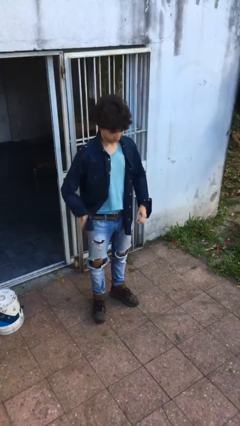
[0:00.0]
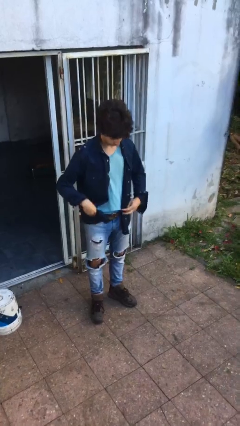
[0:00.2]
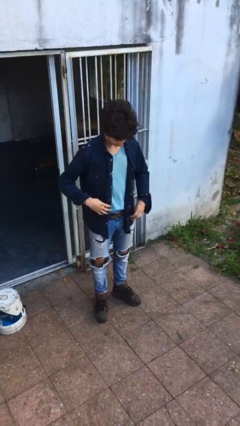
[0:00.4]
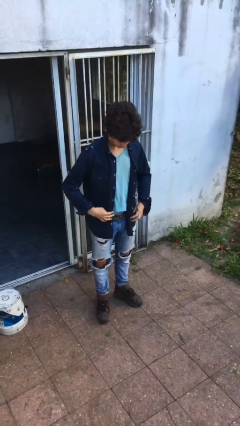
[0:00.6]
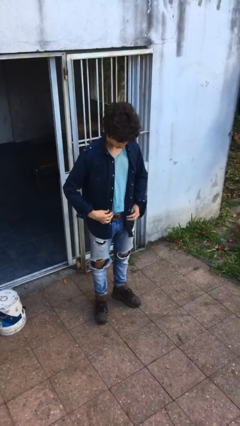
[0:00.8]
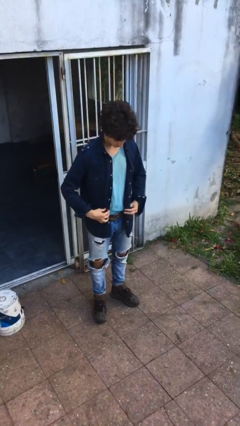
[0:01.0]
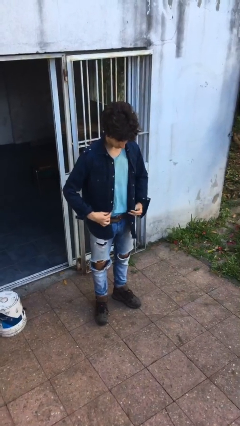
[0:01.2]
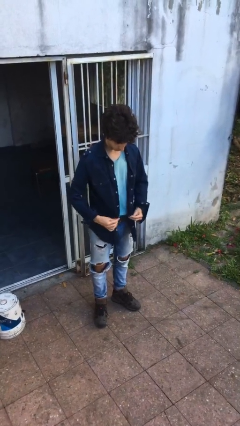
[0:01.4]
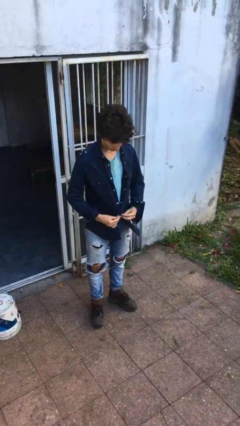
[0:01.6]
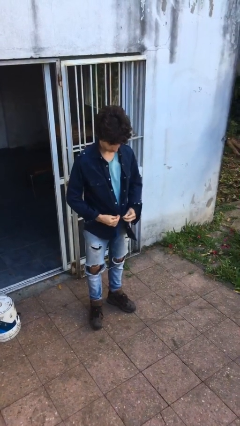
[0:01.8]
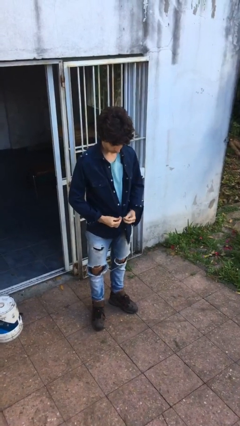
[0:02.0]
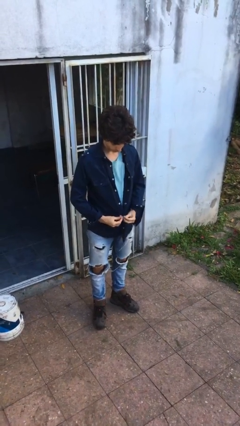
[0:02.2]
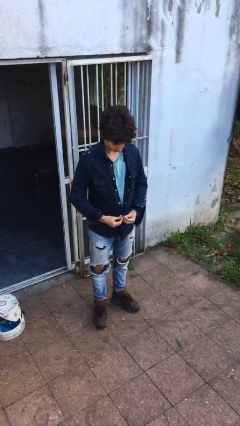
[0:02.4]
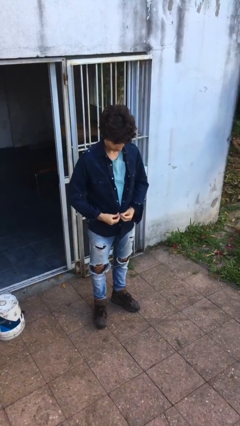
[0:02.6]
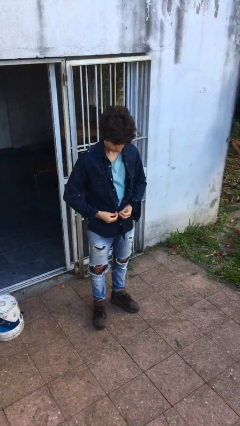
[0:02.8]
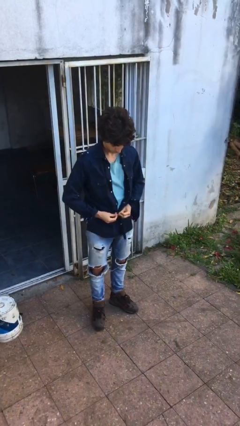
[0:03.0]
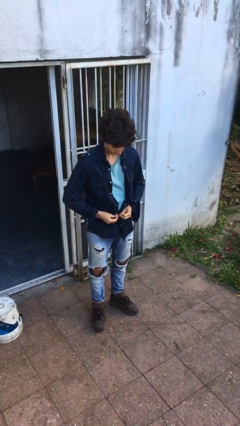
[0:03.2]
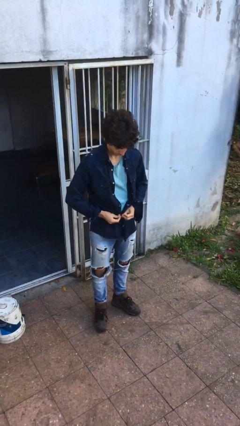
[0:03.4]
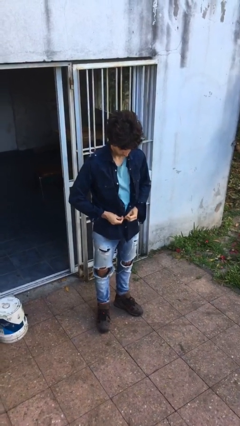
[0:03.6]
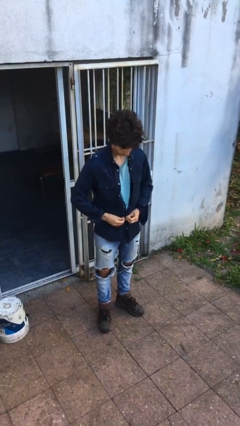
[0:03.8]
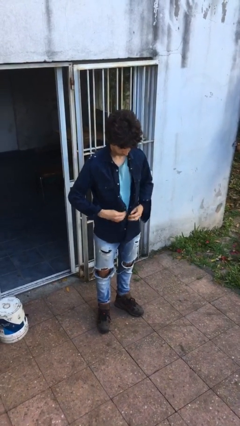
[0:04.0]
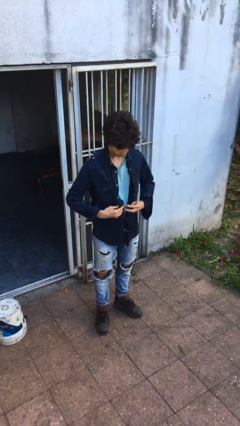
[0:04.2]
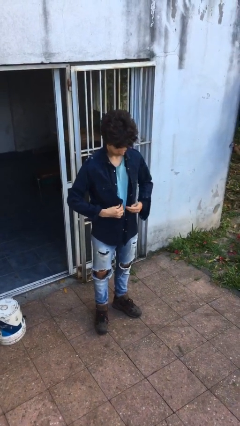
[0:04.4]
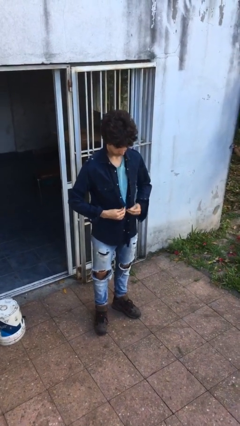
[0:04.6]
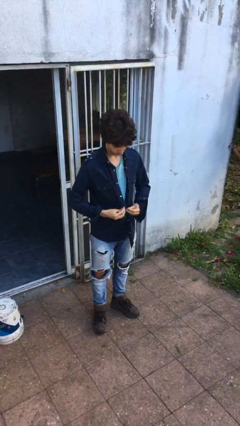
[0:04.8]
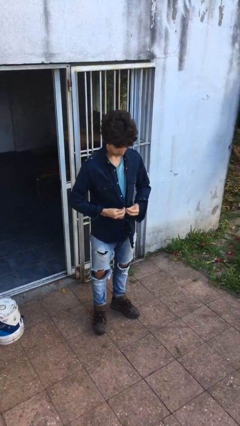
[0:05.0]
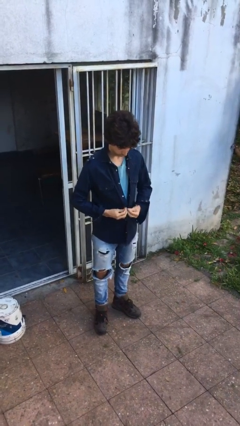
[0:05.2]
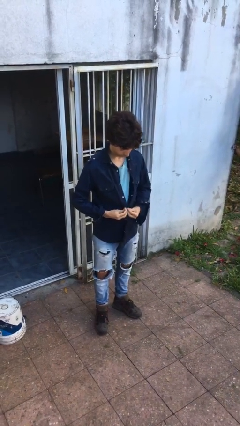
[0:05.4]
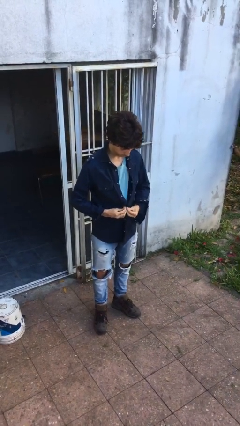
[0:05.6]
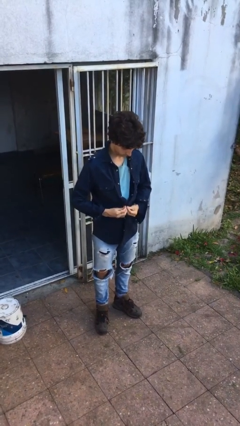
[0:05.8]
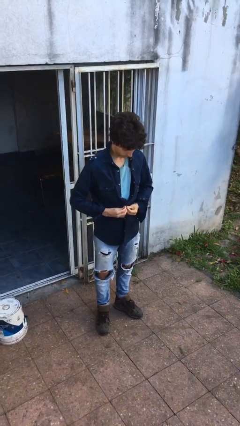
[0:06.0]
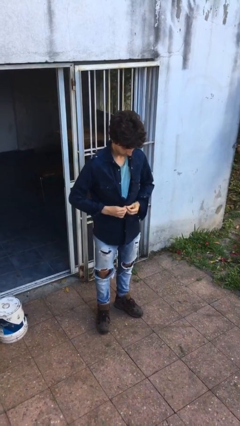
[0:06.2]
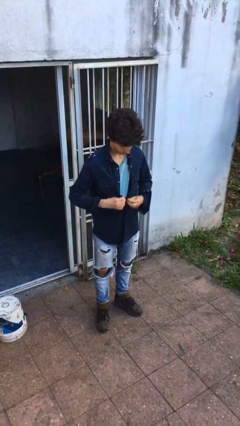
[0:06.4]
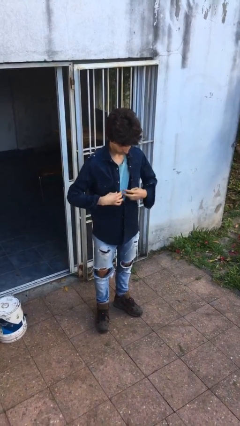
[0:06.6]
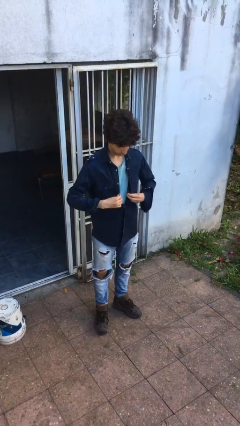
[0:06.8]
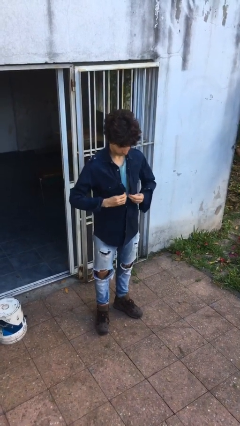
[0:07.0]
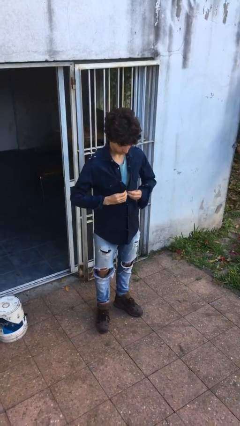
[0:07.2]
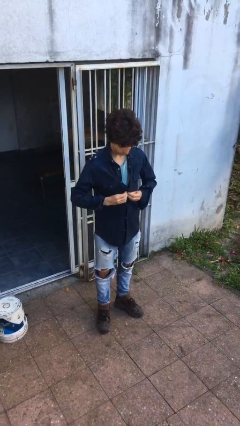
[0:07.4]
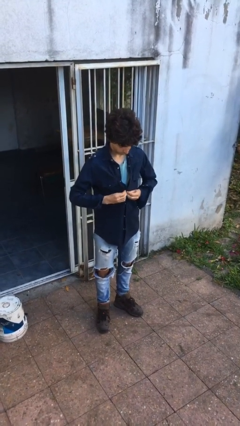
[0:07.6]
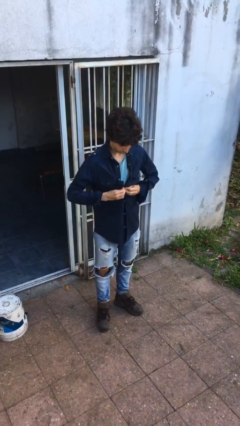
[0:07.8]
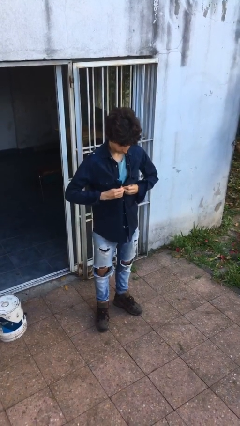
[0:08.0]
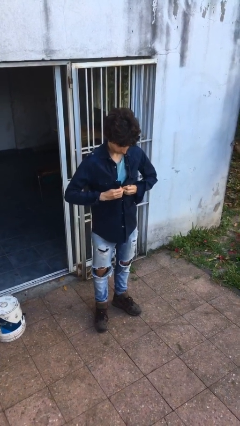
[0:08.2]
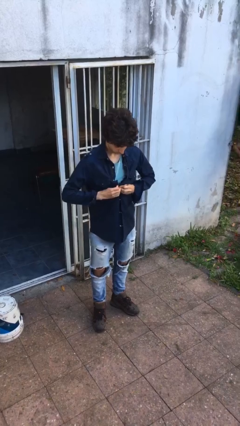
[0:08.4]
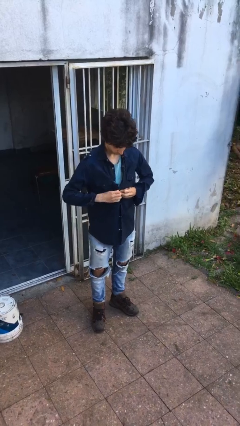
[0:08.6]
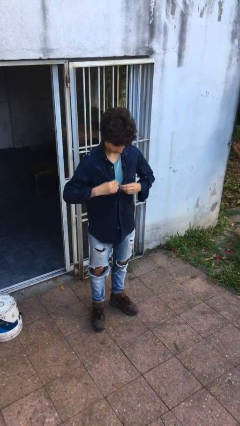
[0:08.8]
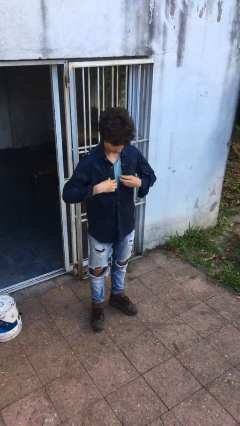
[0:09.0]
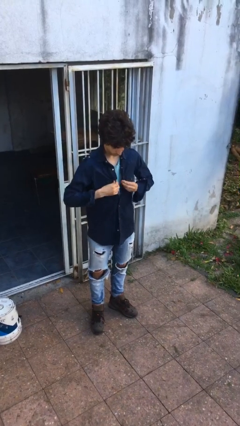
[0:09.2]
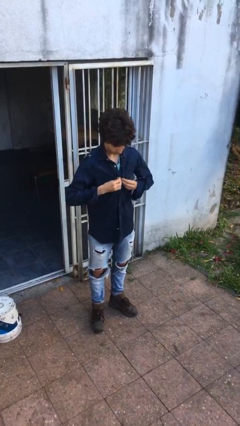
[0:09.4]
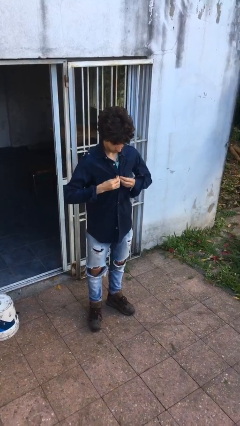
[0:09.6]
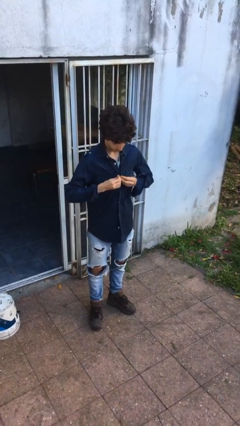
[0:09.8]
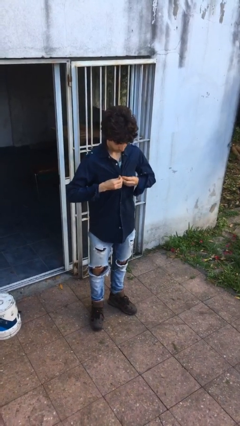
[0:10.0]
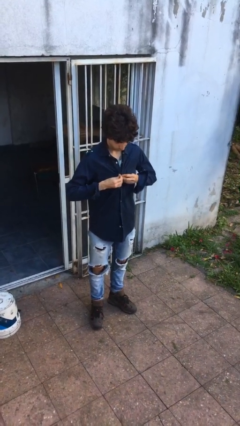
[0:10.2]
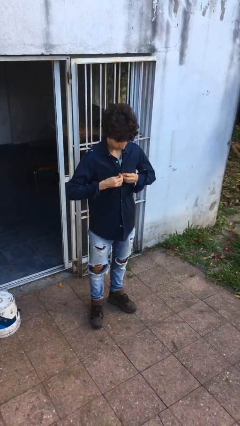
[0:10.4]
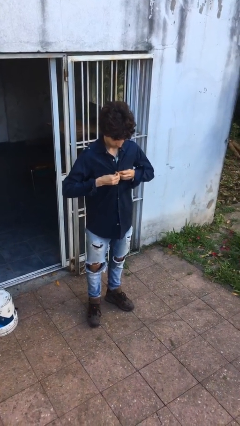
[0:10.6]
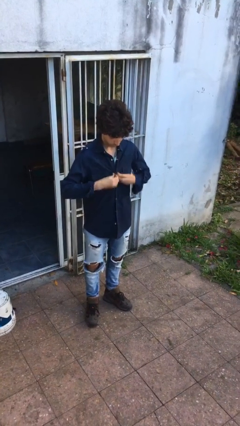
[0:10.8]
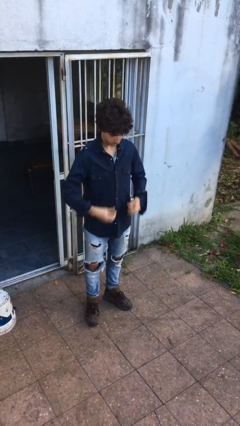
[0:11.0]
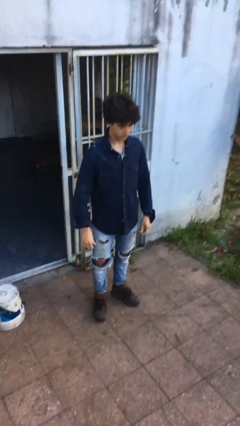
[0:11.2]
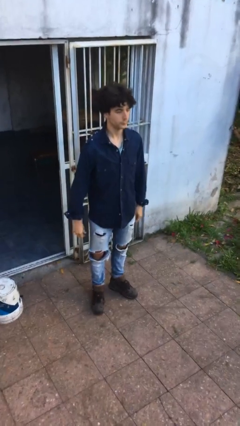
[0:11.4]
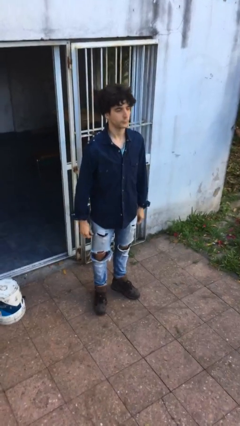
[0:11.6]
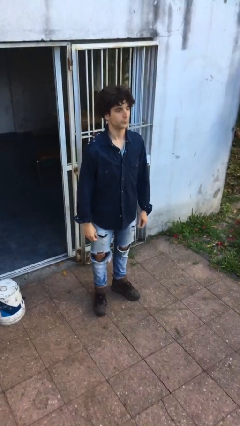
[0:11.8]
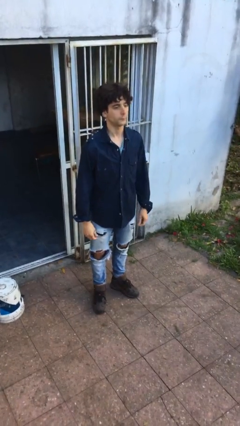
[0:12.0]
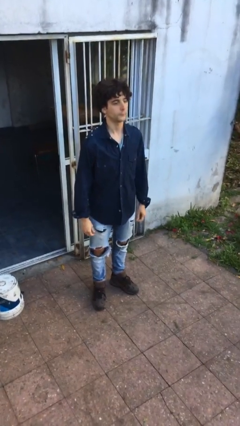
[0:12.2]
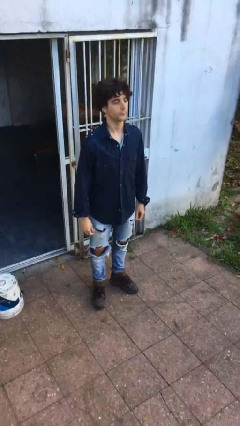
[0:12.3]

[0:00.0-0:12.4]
person buttons shirt

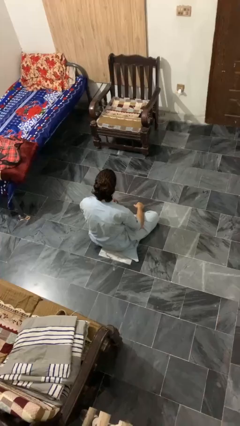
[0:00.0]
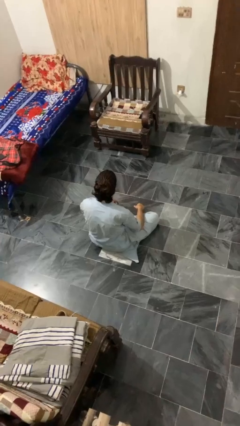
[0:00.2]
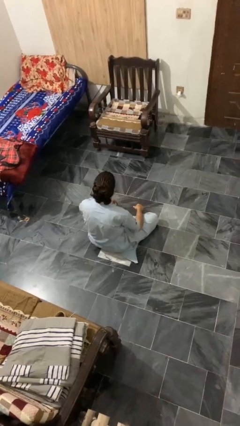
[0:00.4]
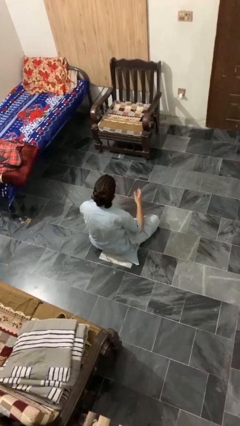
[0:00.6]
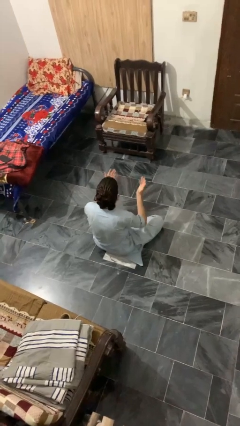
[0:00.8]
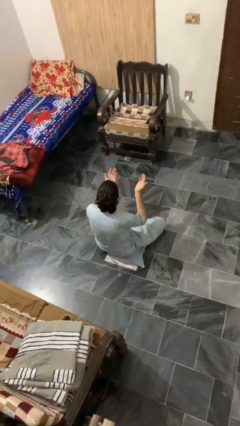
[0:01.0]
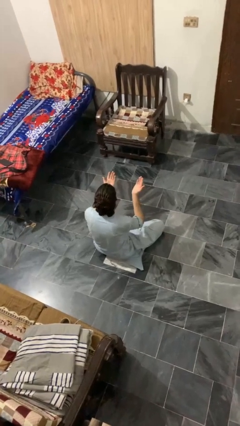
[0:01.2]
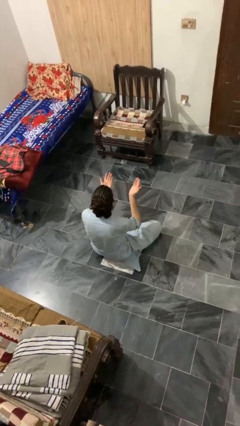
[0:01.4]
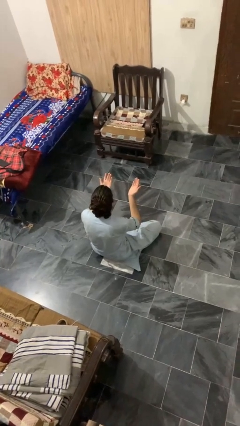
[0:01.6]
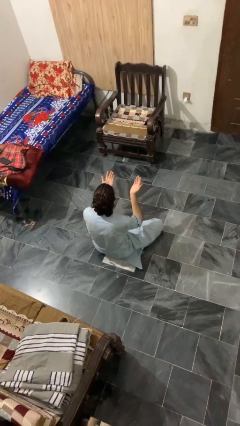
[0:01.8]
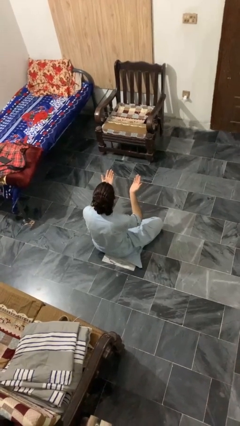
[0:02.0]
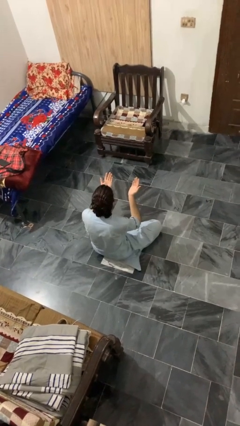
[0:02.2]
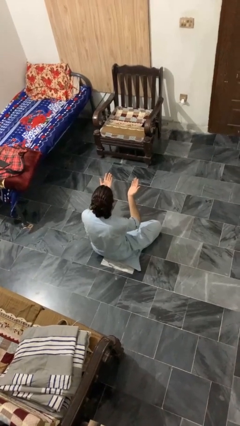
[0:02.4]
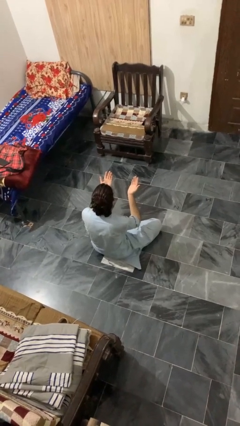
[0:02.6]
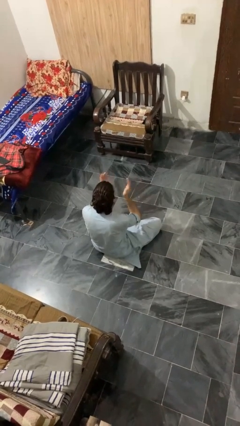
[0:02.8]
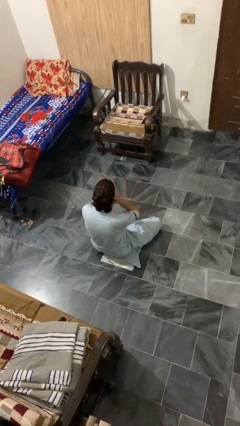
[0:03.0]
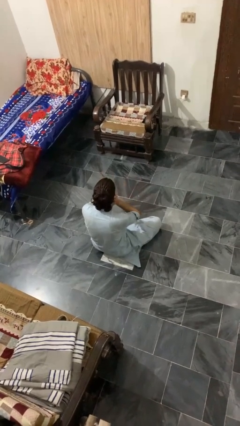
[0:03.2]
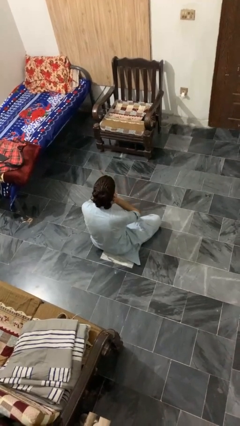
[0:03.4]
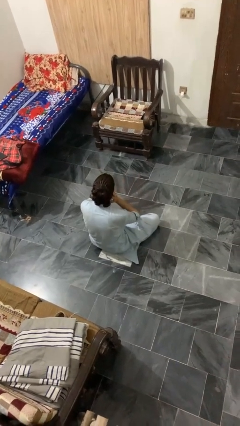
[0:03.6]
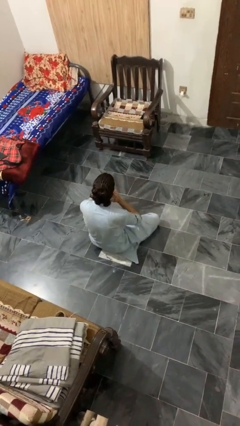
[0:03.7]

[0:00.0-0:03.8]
person prays

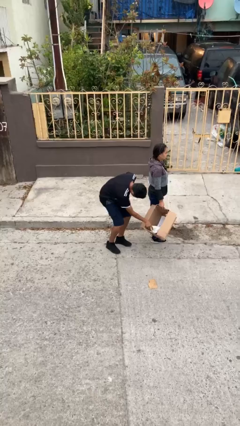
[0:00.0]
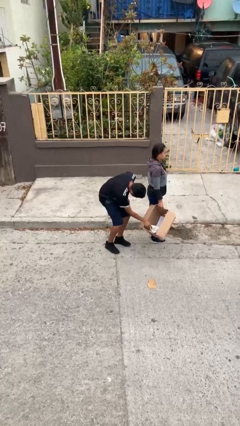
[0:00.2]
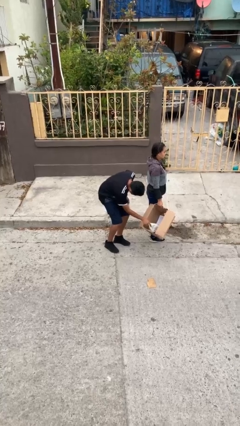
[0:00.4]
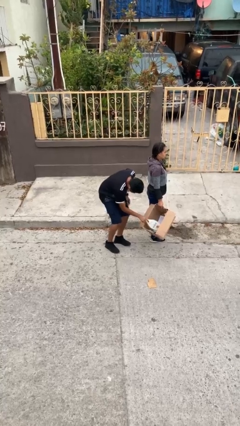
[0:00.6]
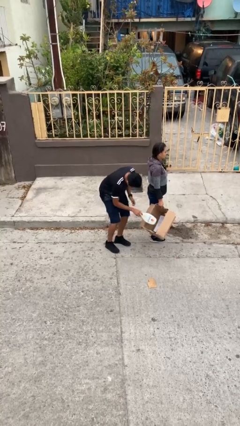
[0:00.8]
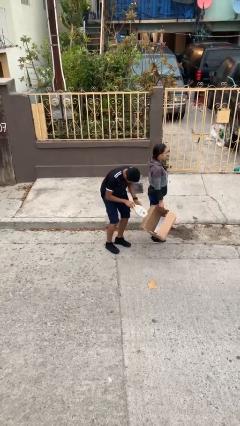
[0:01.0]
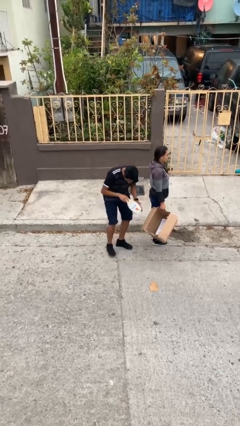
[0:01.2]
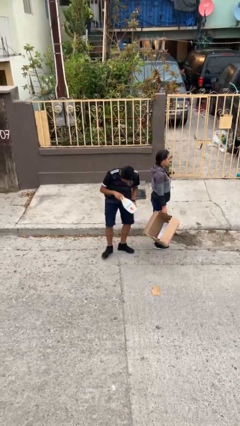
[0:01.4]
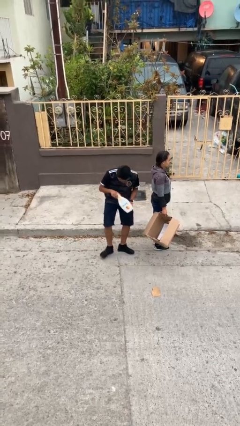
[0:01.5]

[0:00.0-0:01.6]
person steals object from person

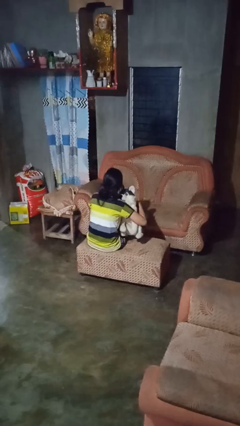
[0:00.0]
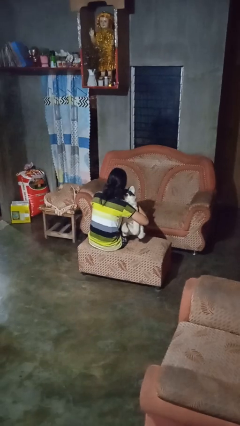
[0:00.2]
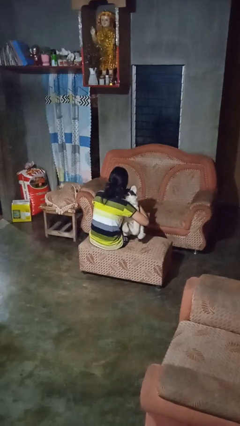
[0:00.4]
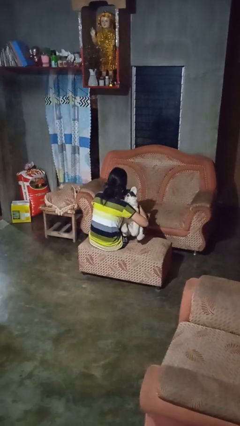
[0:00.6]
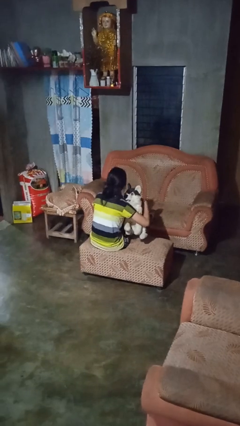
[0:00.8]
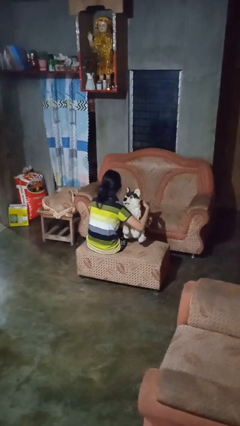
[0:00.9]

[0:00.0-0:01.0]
person hugs stuffed animal
